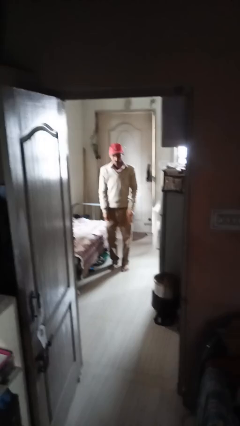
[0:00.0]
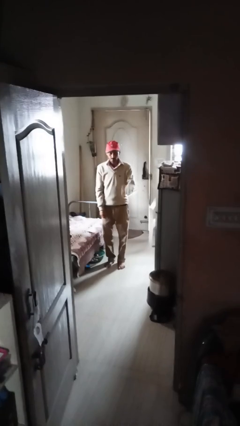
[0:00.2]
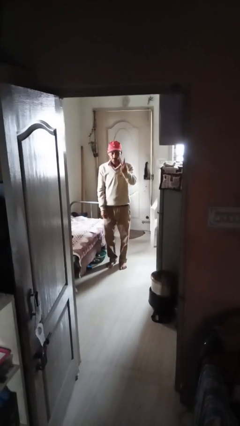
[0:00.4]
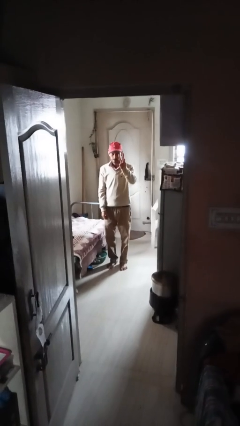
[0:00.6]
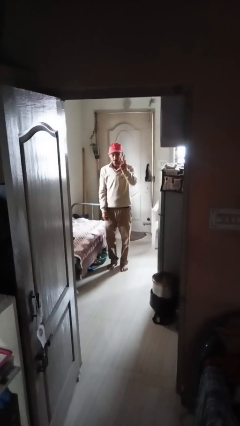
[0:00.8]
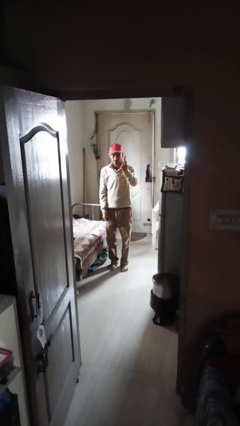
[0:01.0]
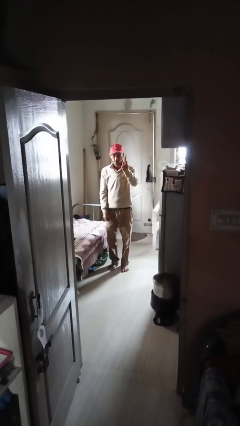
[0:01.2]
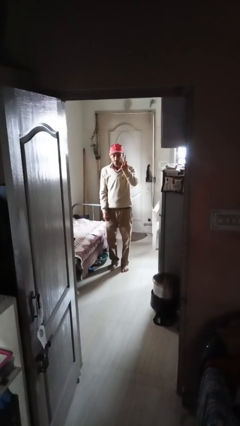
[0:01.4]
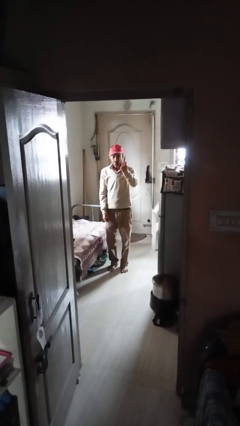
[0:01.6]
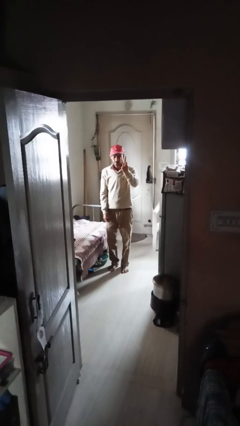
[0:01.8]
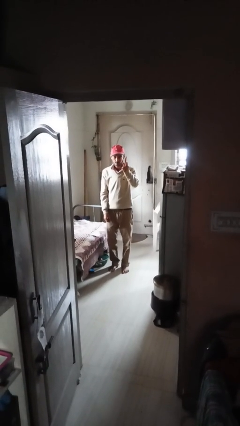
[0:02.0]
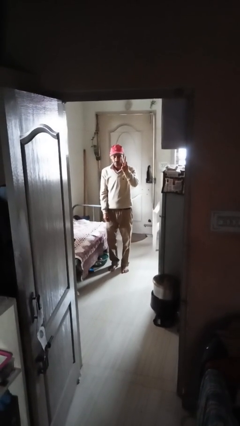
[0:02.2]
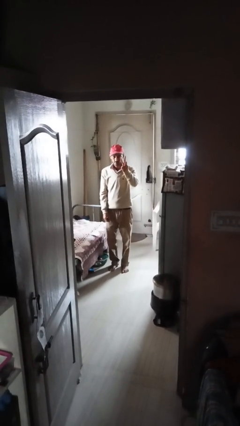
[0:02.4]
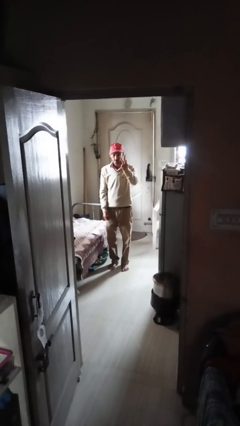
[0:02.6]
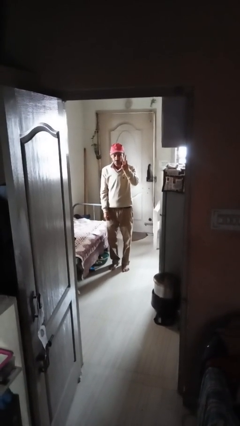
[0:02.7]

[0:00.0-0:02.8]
person gestures peace

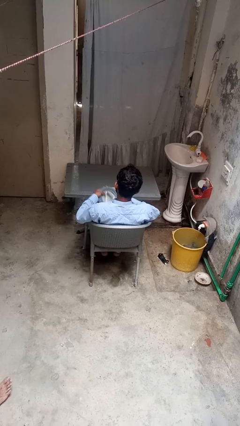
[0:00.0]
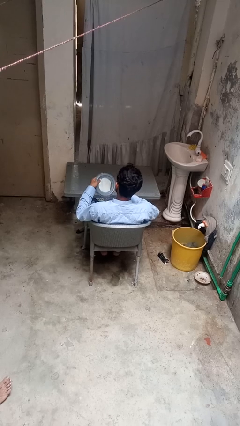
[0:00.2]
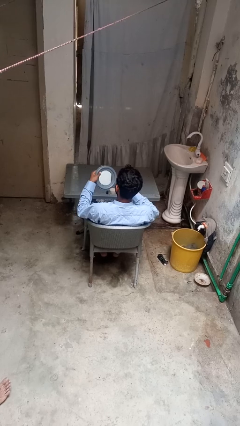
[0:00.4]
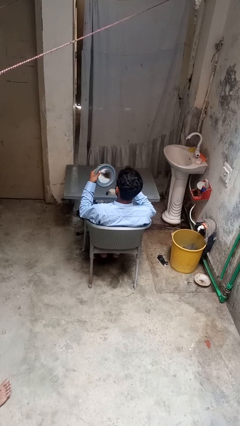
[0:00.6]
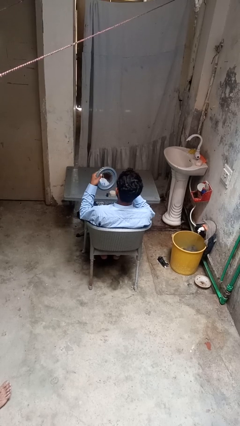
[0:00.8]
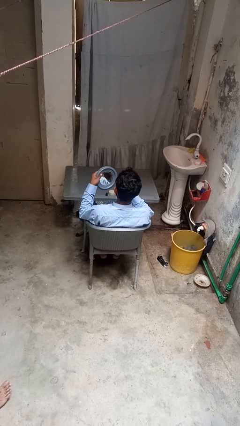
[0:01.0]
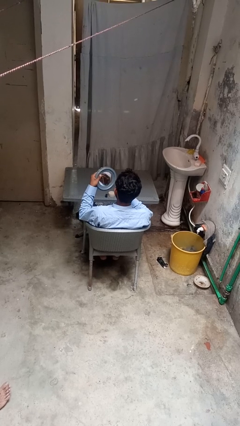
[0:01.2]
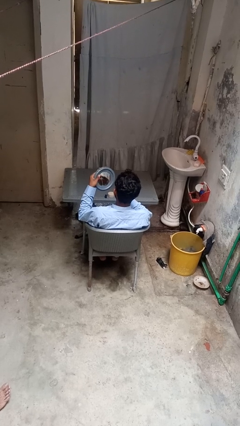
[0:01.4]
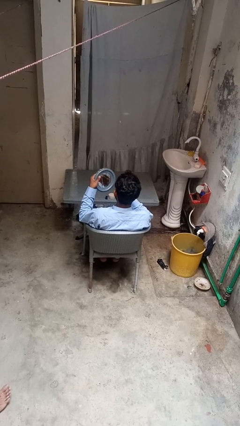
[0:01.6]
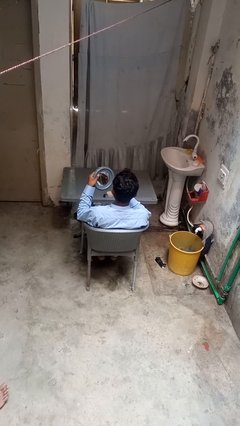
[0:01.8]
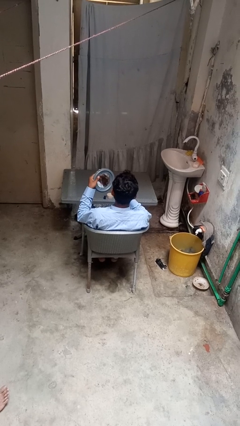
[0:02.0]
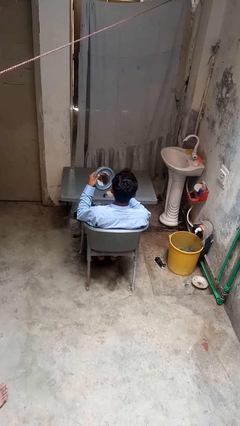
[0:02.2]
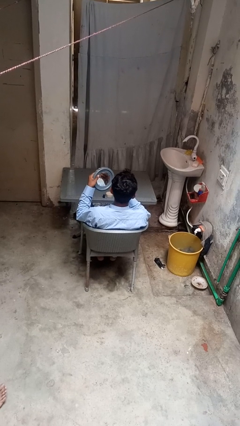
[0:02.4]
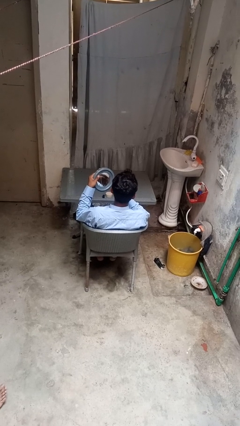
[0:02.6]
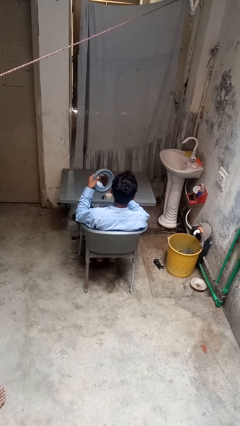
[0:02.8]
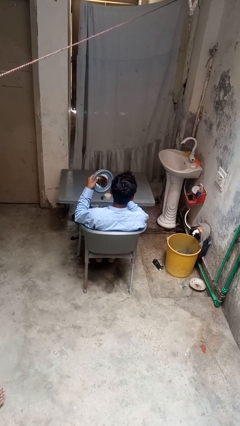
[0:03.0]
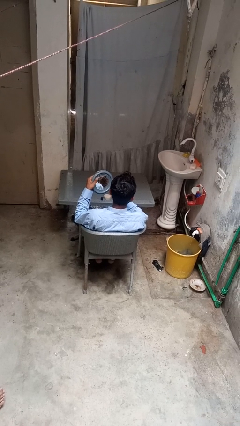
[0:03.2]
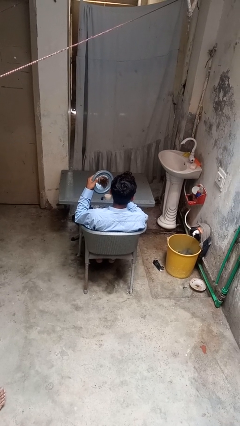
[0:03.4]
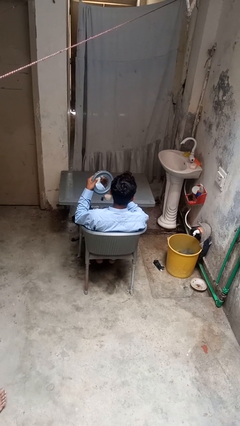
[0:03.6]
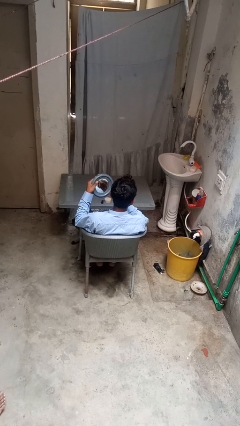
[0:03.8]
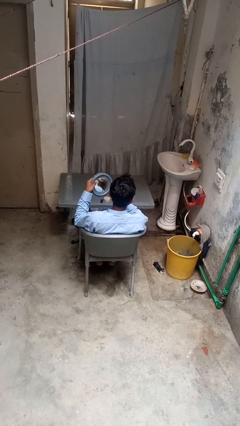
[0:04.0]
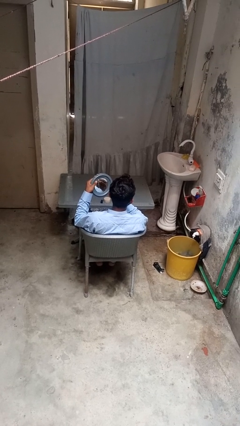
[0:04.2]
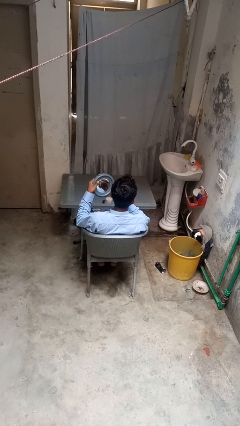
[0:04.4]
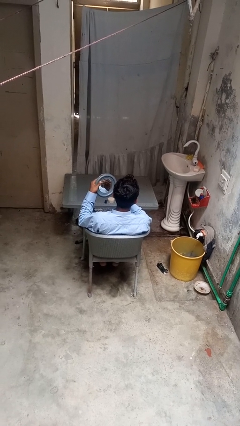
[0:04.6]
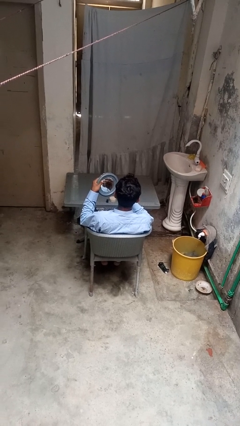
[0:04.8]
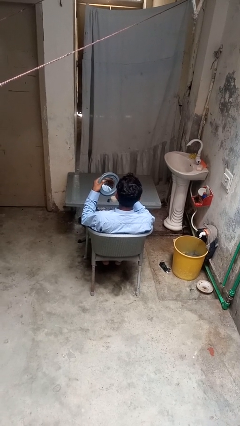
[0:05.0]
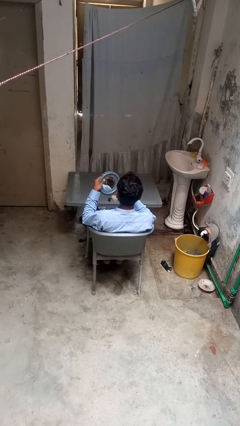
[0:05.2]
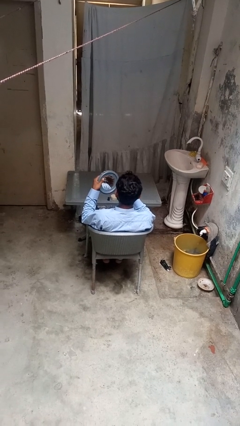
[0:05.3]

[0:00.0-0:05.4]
person applies lip makeup

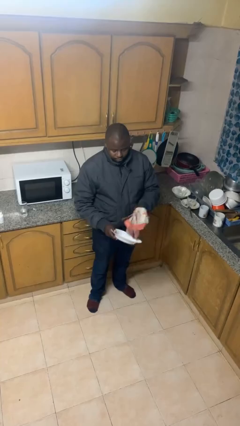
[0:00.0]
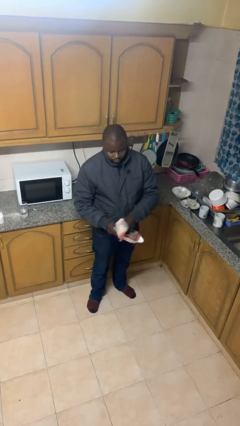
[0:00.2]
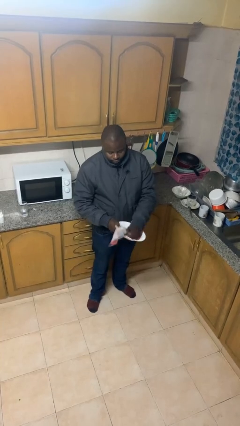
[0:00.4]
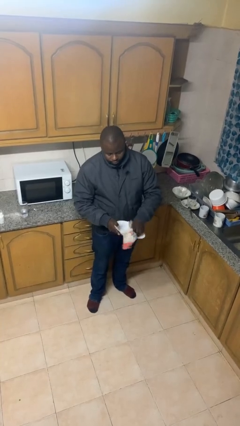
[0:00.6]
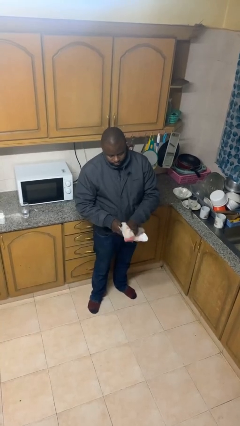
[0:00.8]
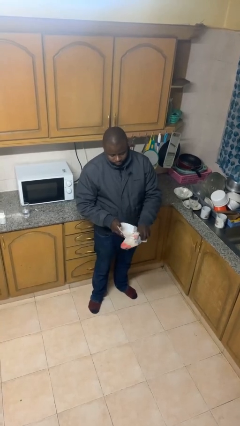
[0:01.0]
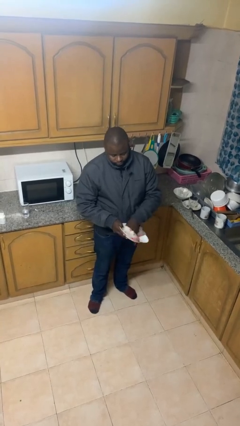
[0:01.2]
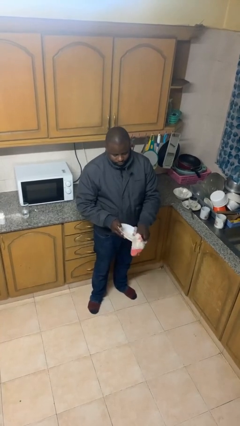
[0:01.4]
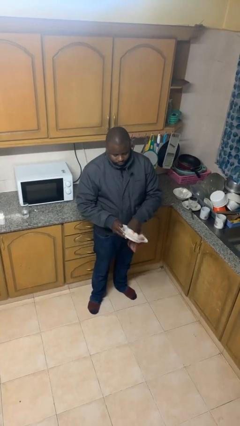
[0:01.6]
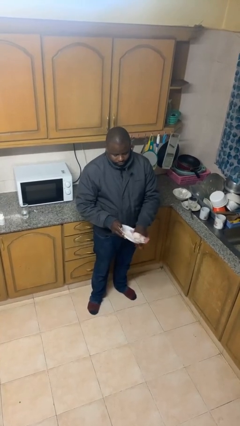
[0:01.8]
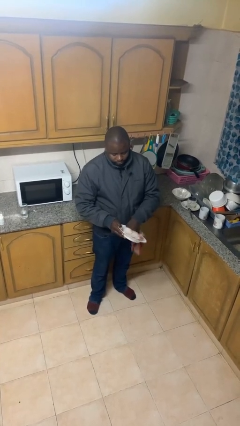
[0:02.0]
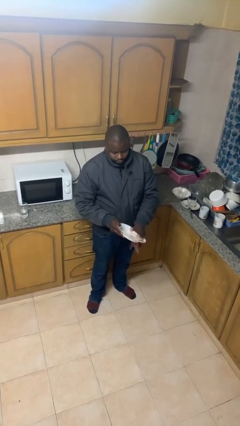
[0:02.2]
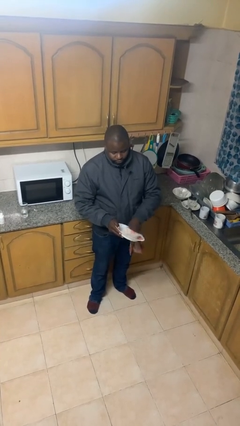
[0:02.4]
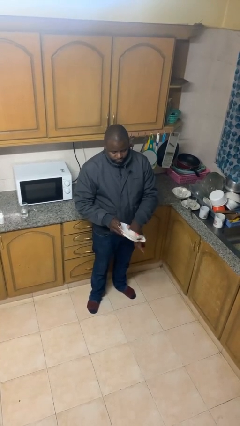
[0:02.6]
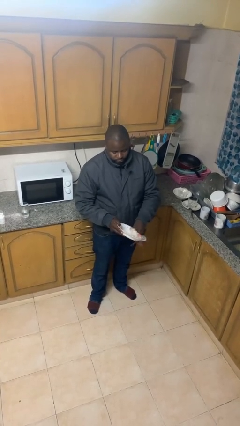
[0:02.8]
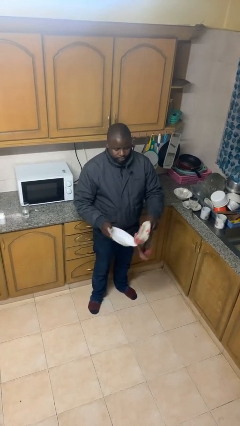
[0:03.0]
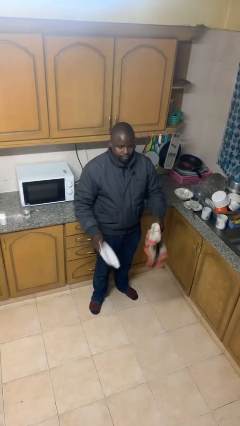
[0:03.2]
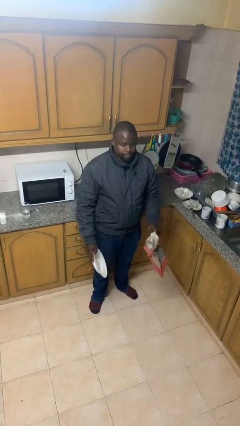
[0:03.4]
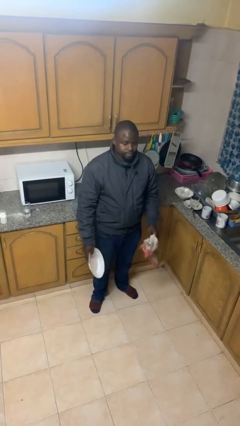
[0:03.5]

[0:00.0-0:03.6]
person dries dish

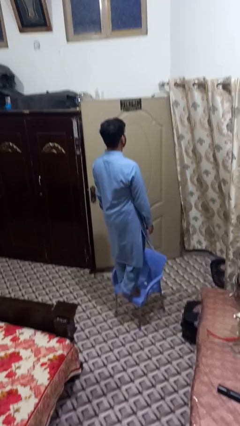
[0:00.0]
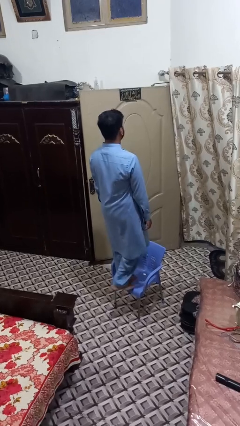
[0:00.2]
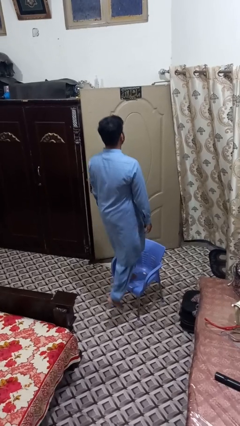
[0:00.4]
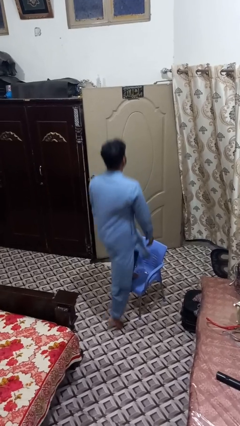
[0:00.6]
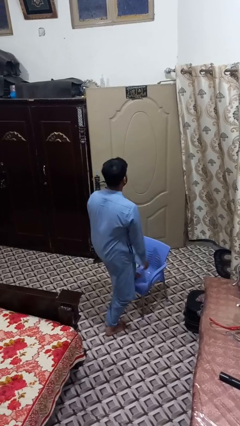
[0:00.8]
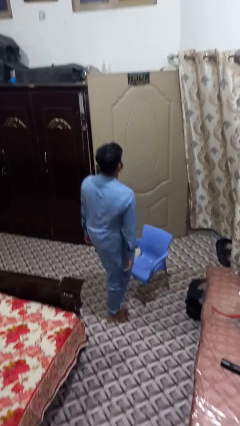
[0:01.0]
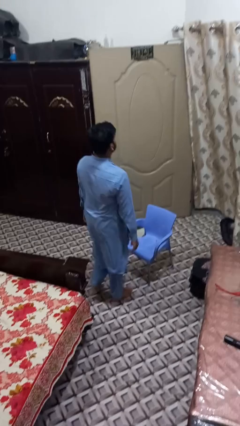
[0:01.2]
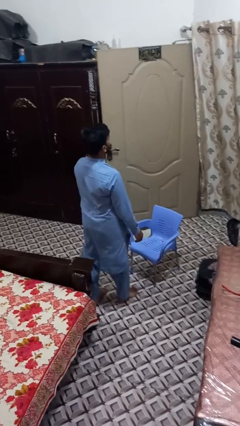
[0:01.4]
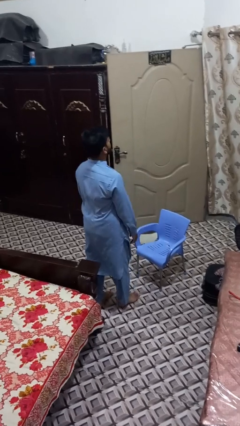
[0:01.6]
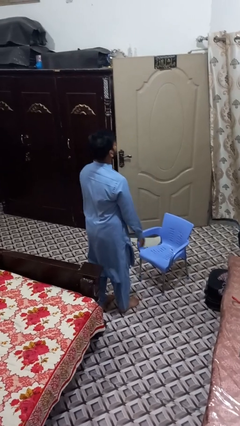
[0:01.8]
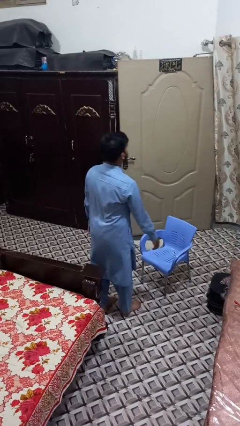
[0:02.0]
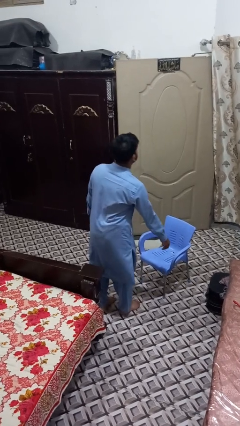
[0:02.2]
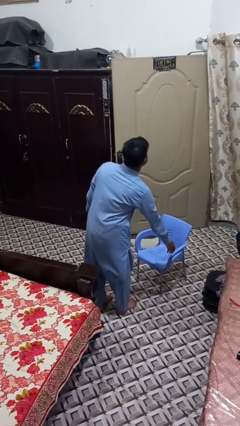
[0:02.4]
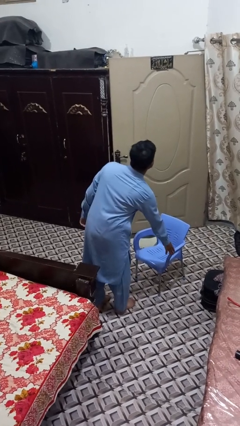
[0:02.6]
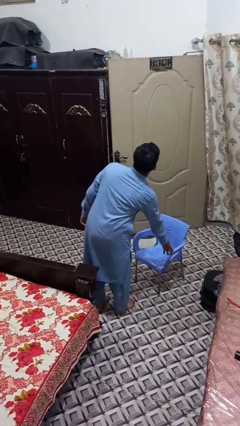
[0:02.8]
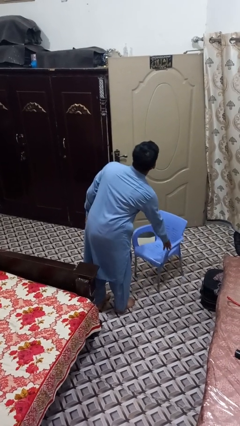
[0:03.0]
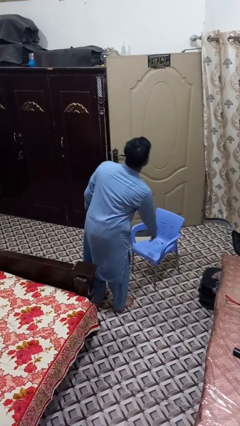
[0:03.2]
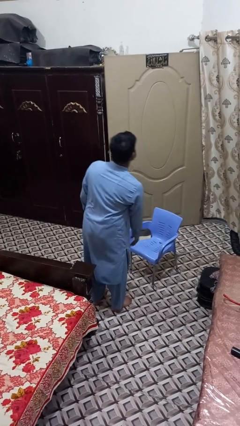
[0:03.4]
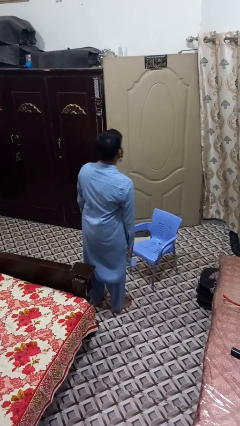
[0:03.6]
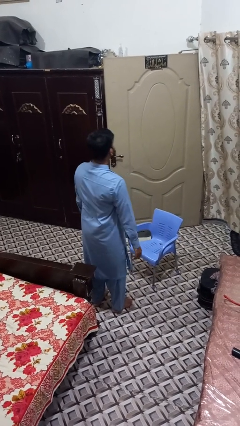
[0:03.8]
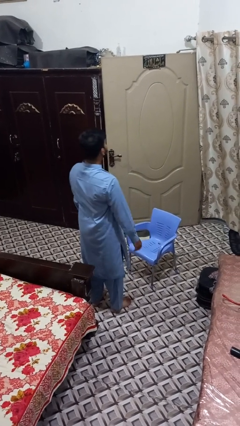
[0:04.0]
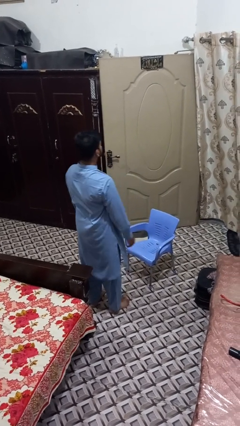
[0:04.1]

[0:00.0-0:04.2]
person climbs off chair

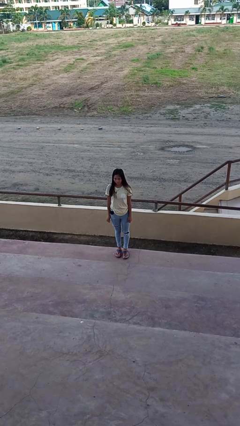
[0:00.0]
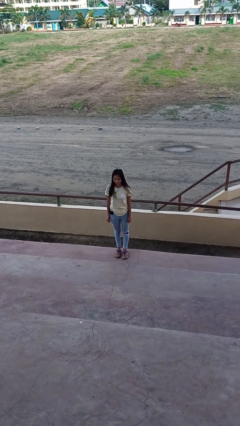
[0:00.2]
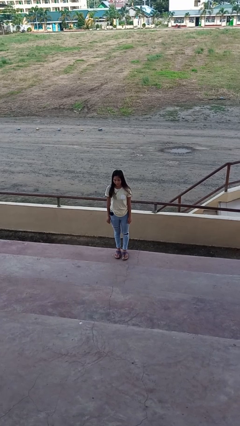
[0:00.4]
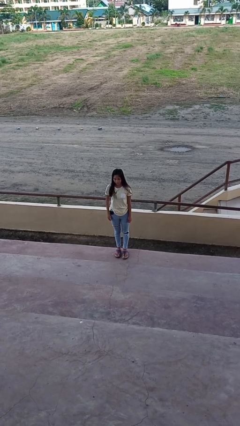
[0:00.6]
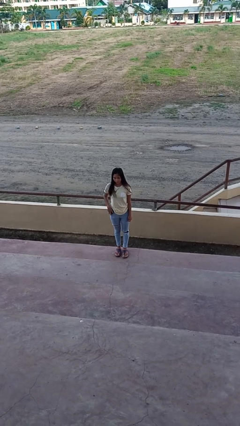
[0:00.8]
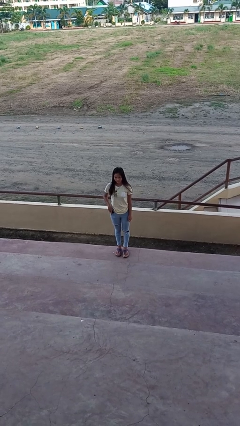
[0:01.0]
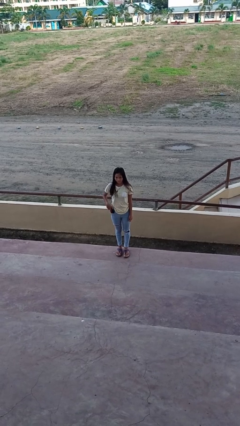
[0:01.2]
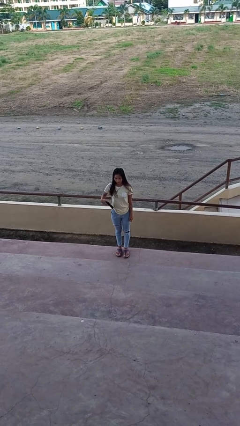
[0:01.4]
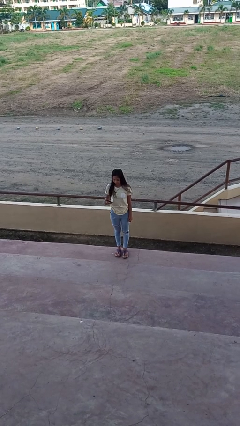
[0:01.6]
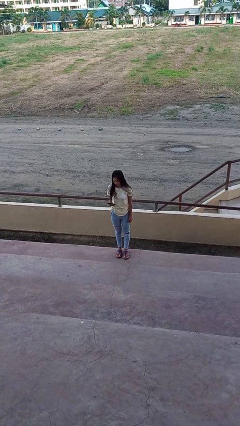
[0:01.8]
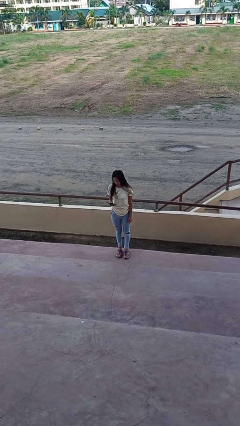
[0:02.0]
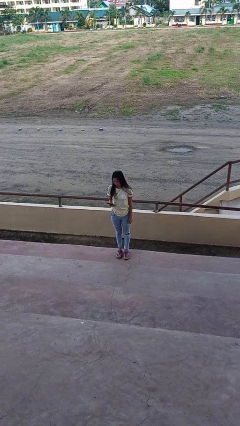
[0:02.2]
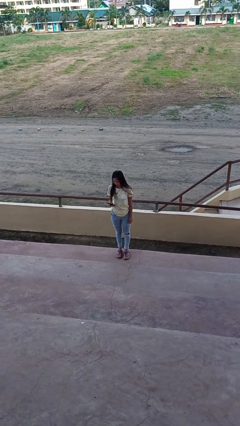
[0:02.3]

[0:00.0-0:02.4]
person takes phone from pocket
